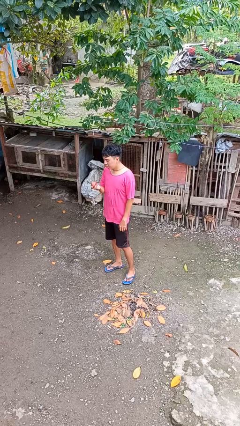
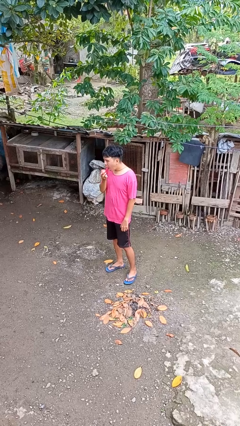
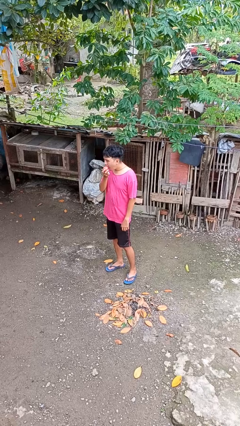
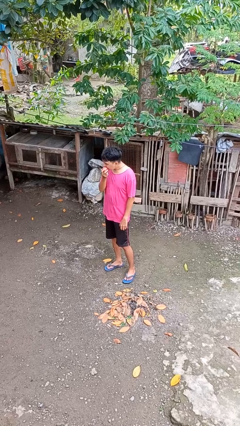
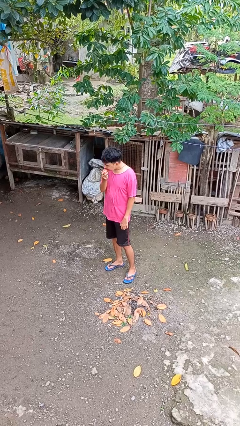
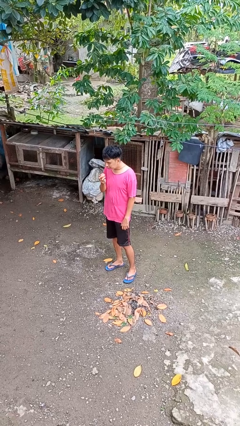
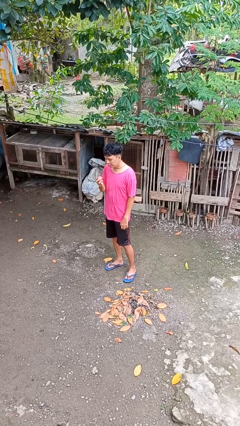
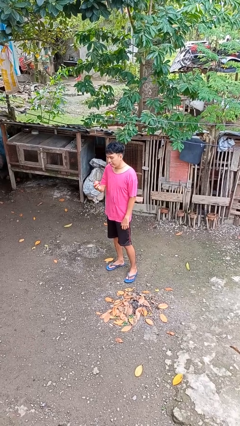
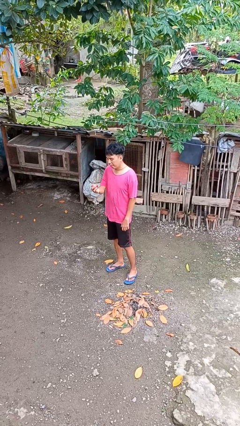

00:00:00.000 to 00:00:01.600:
person eats apple

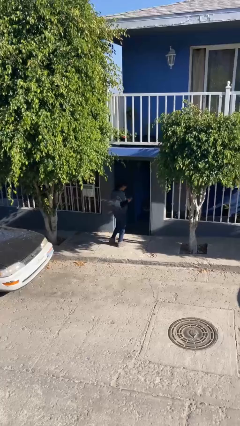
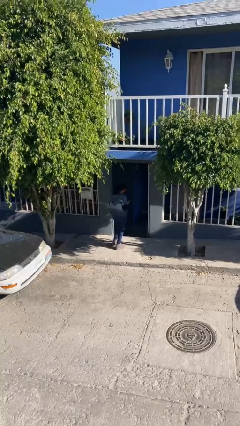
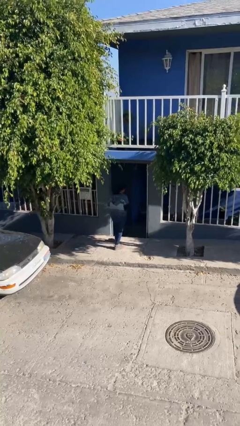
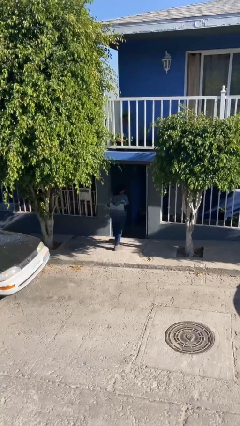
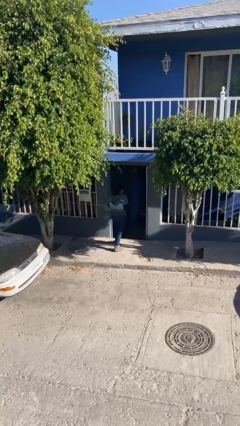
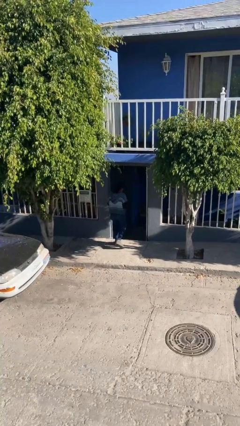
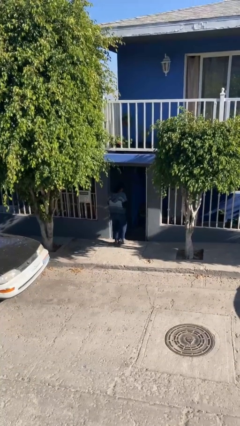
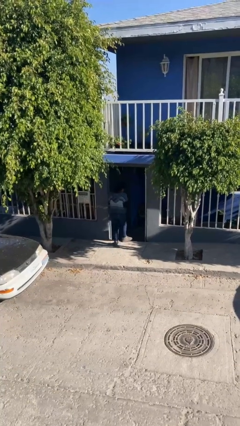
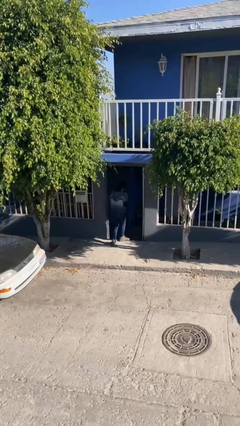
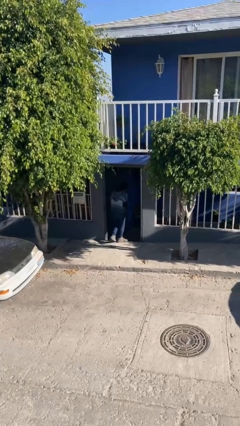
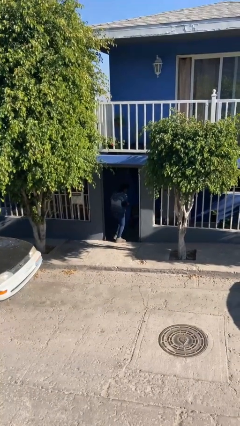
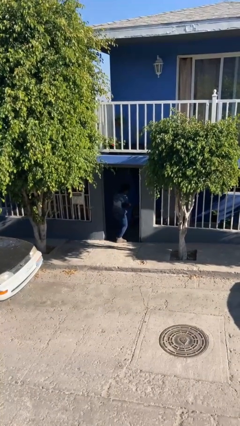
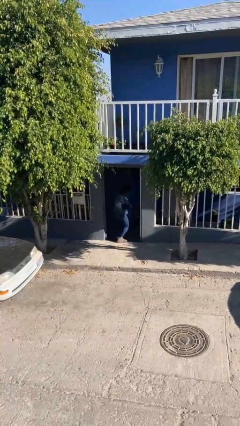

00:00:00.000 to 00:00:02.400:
person exits scene through structure

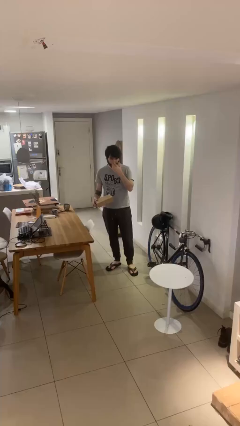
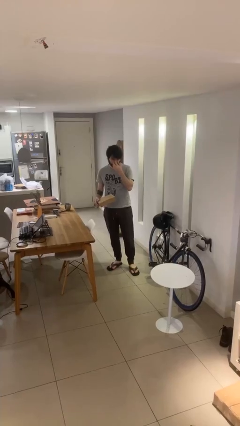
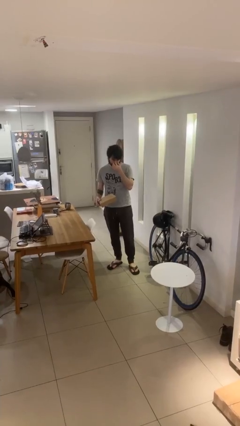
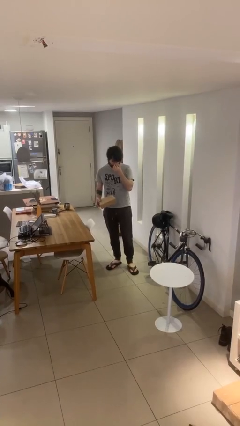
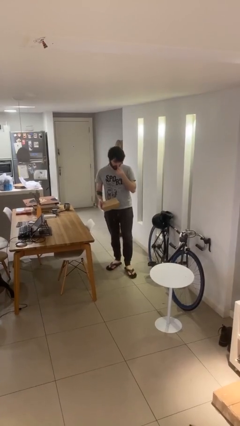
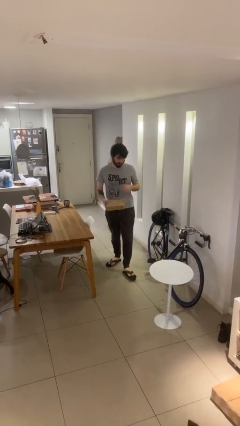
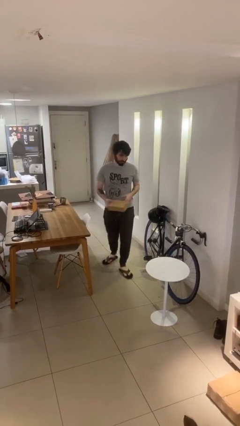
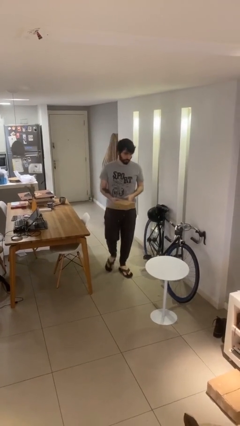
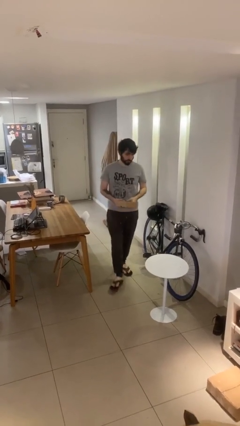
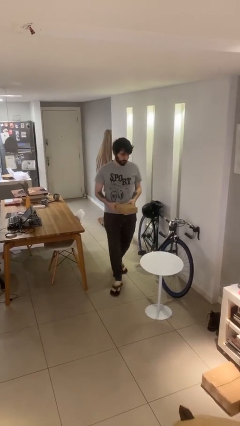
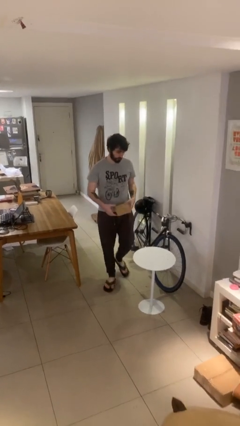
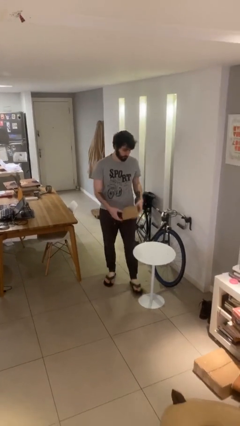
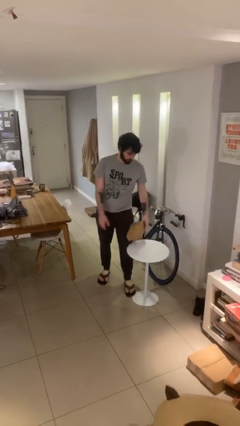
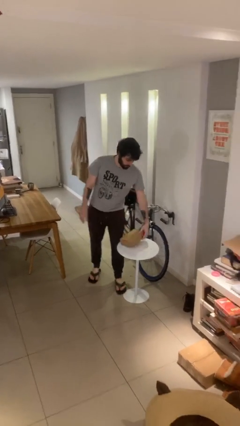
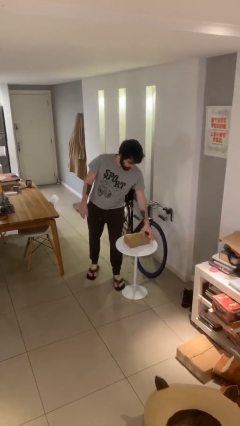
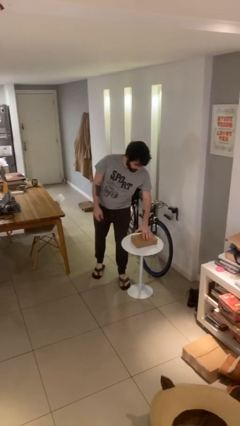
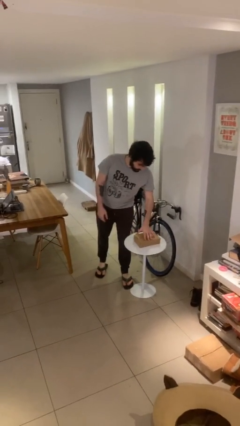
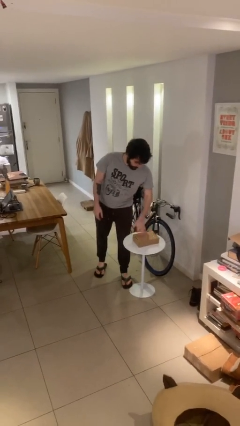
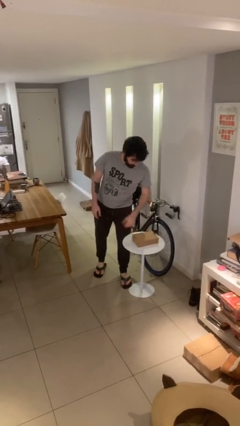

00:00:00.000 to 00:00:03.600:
person puts down object on table

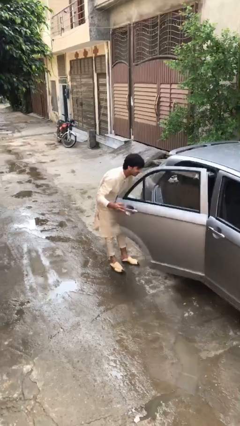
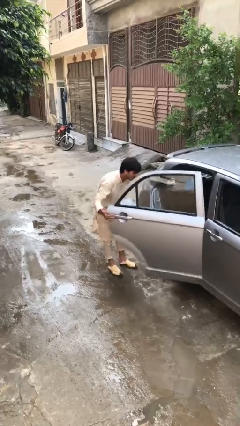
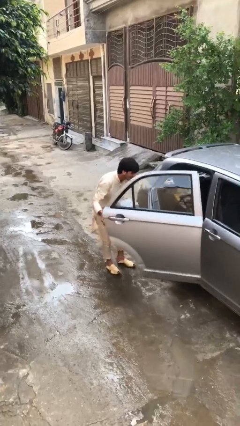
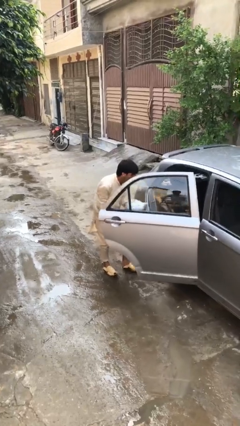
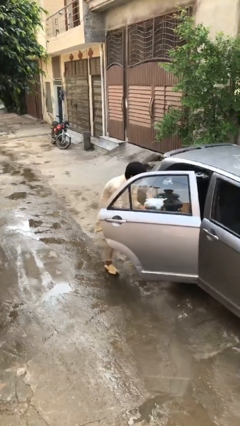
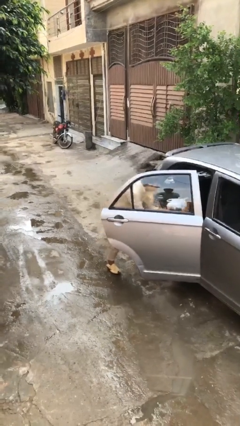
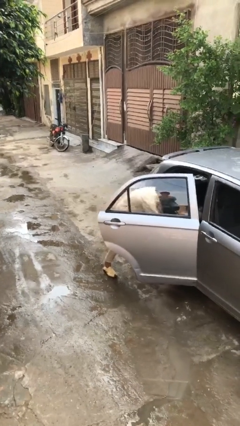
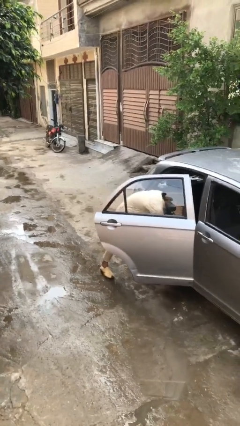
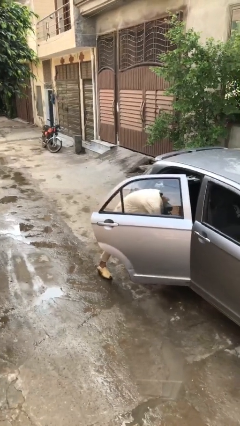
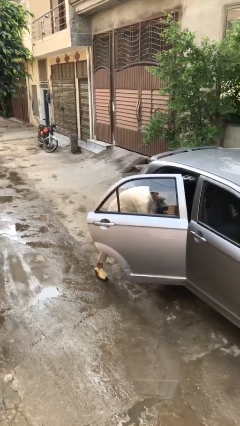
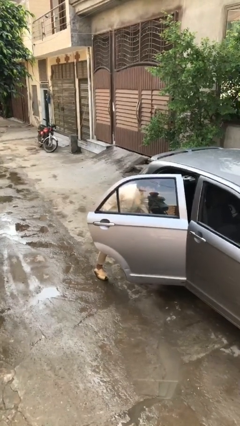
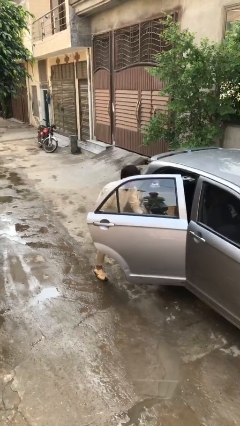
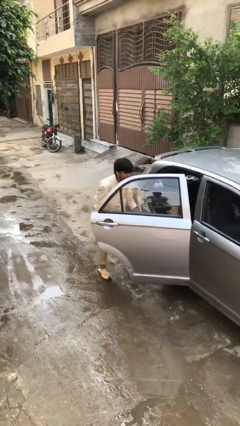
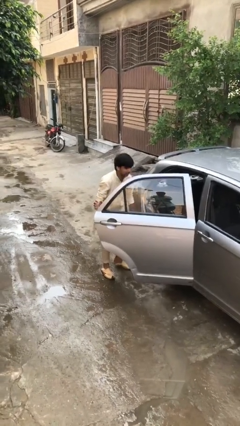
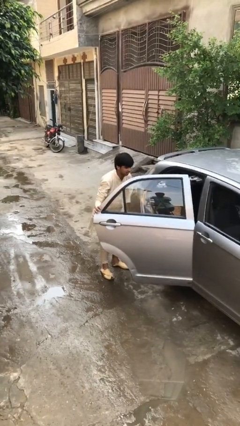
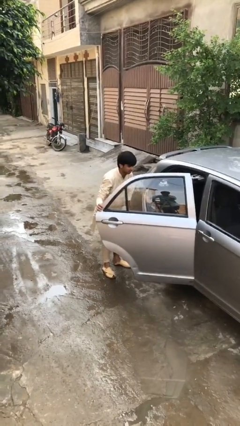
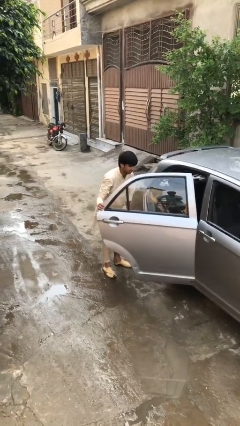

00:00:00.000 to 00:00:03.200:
person loads car

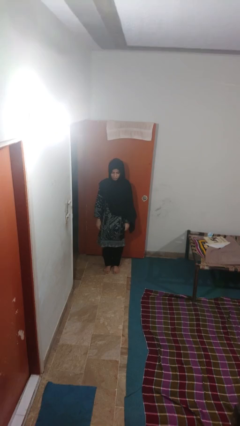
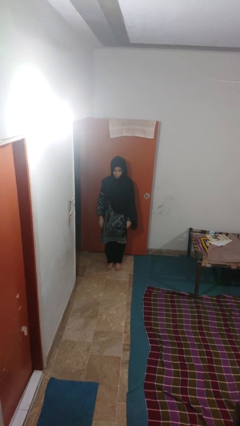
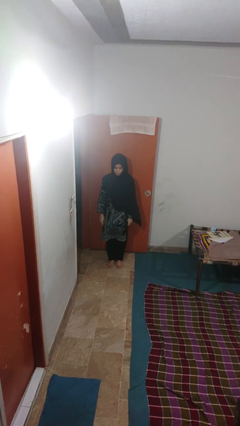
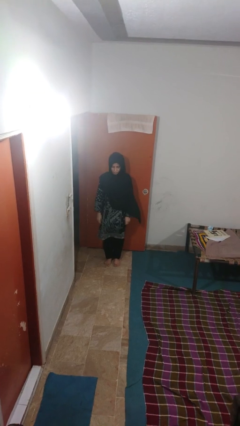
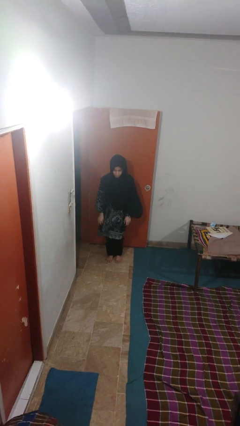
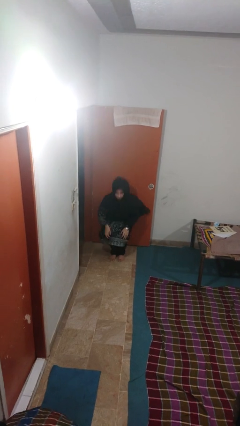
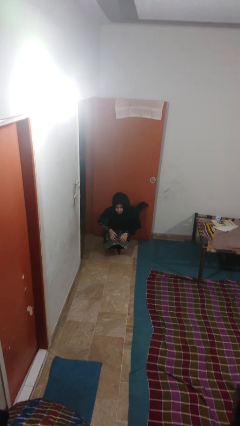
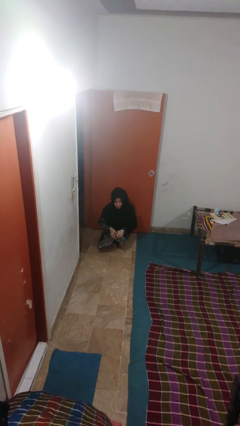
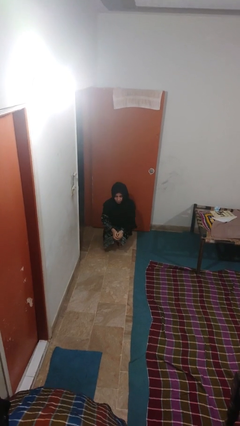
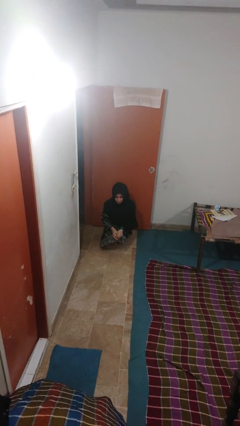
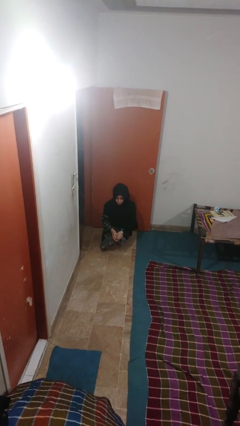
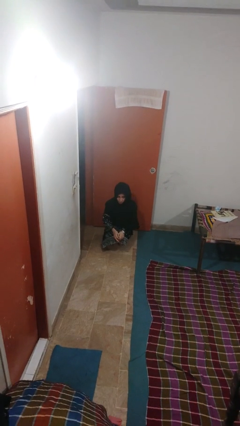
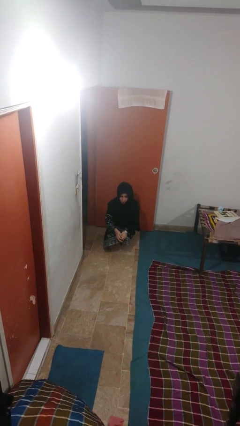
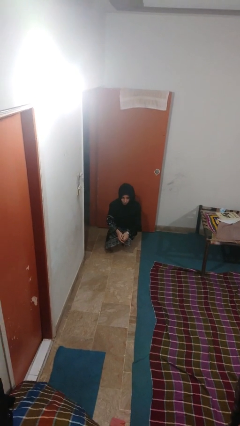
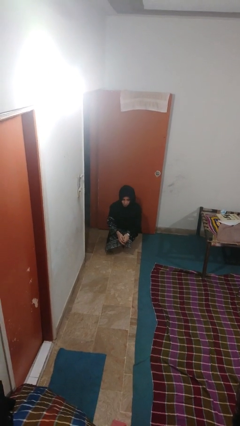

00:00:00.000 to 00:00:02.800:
person squats

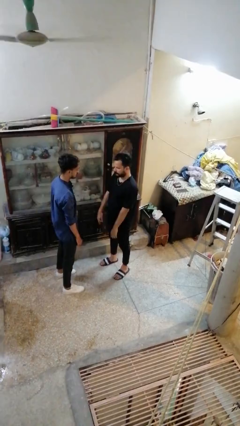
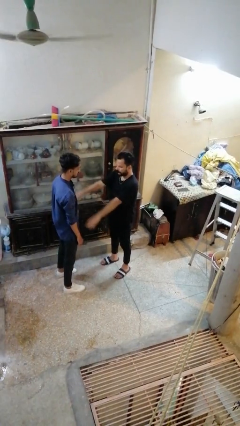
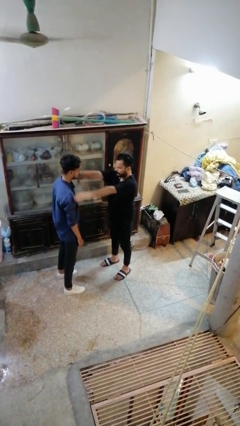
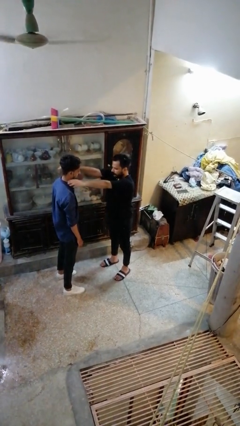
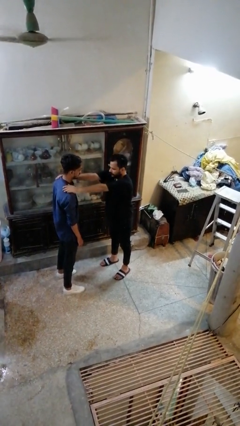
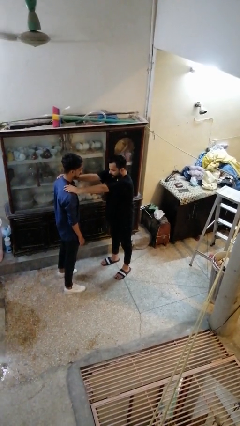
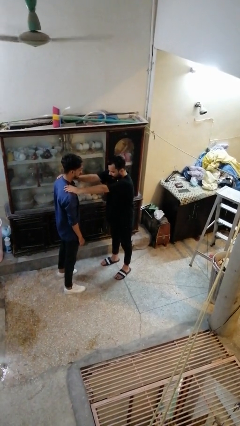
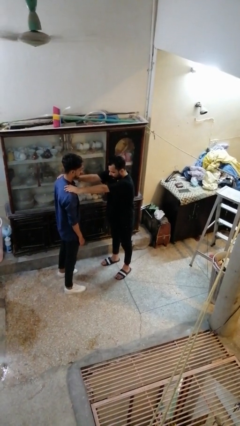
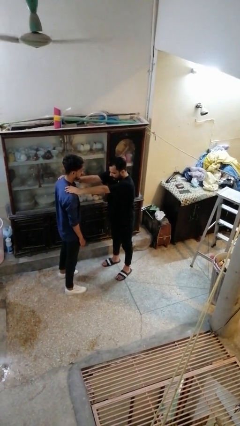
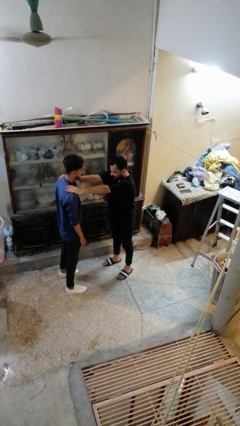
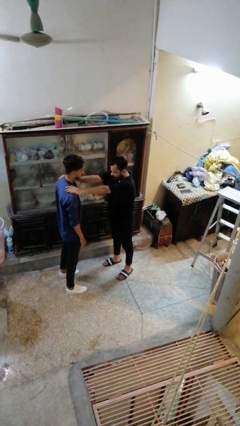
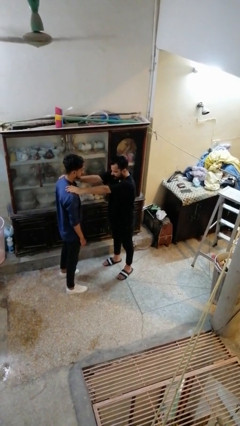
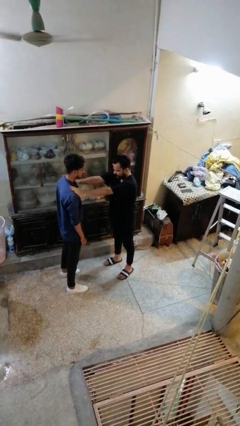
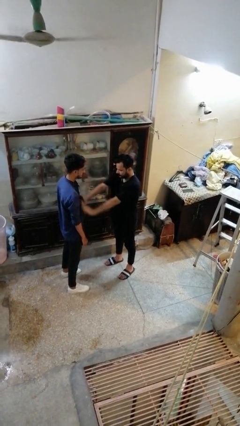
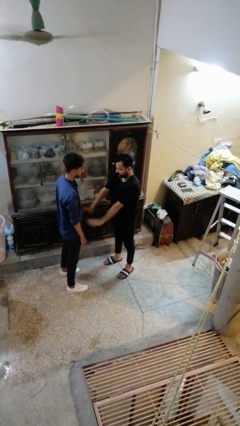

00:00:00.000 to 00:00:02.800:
person pounds shoulders of person

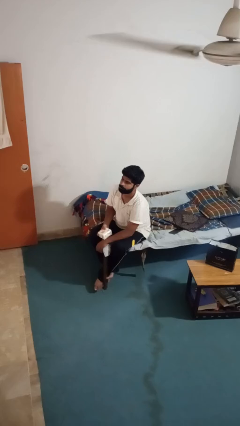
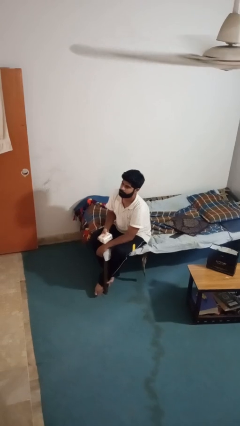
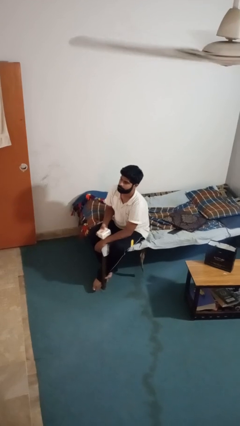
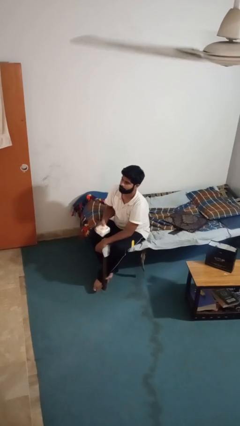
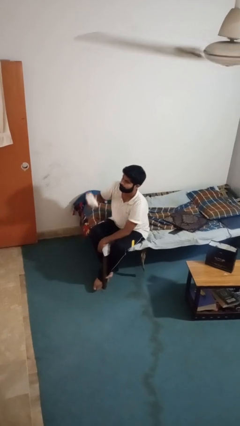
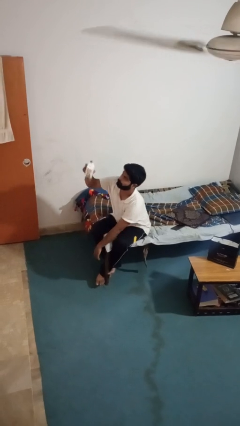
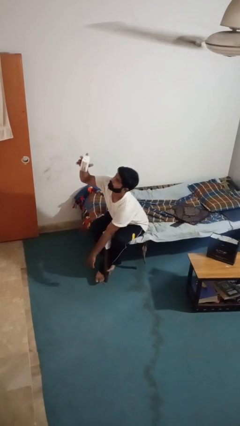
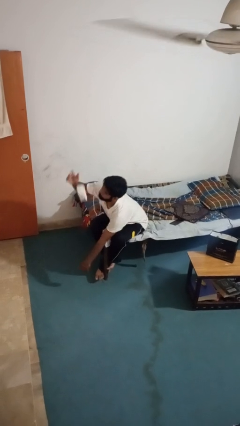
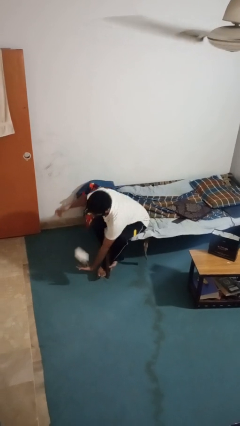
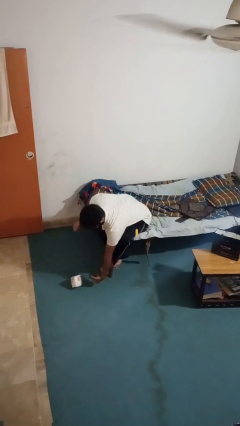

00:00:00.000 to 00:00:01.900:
person drops object
